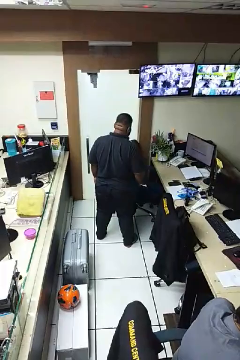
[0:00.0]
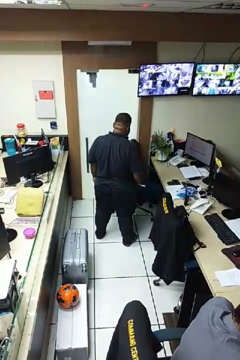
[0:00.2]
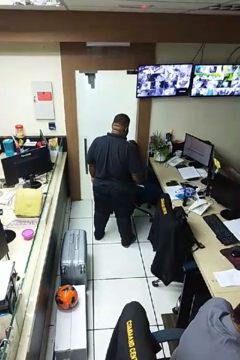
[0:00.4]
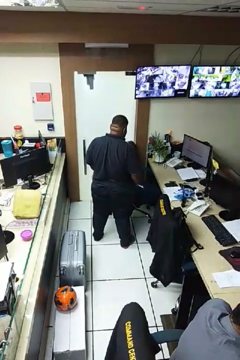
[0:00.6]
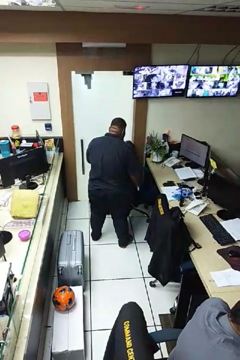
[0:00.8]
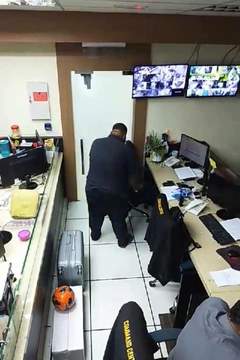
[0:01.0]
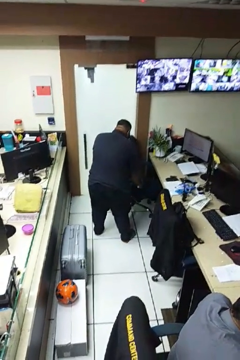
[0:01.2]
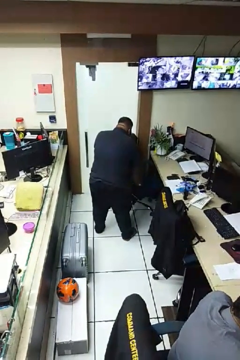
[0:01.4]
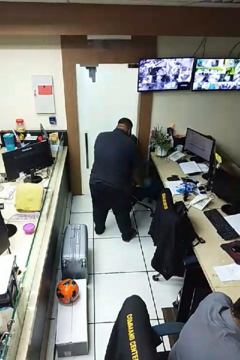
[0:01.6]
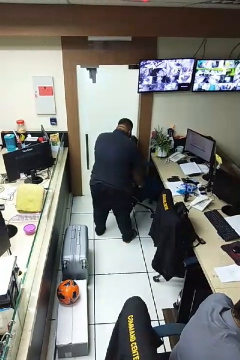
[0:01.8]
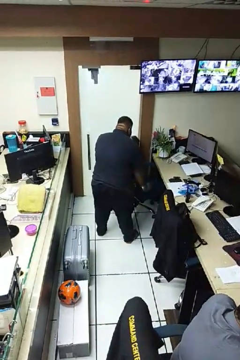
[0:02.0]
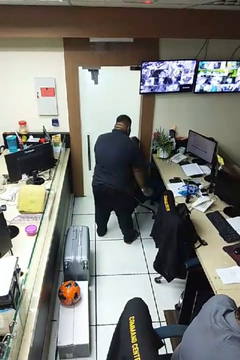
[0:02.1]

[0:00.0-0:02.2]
person dusts furniture

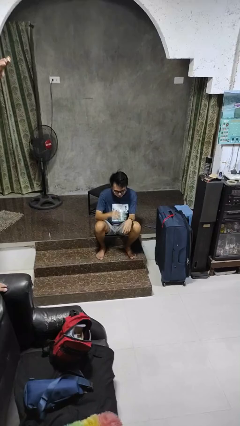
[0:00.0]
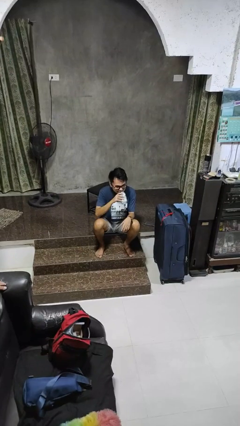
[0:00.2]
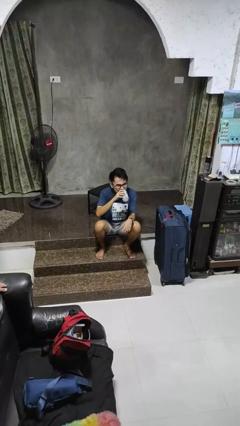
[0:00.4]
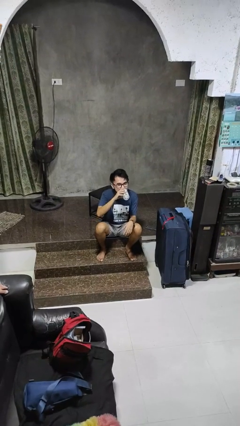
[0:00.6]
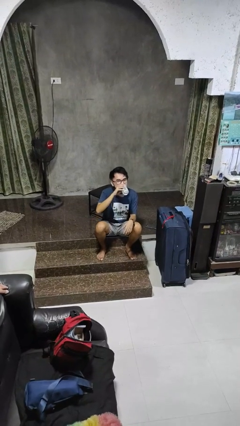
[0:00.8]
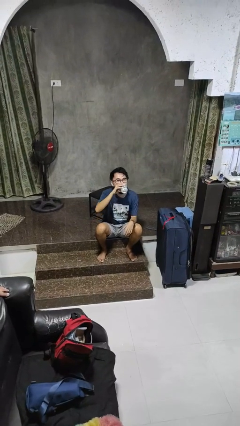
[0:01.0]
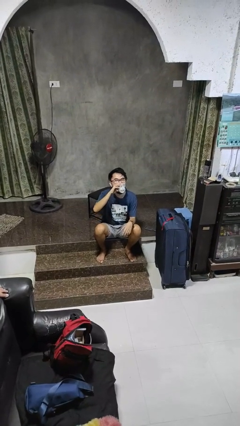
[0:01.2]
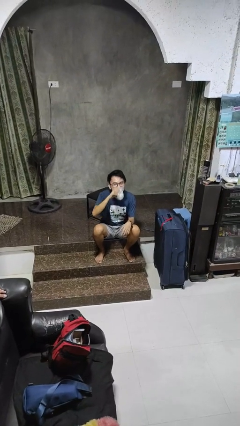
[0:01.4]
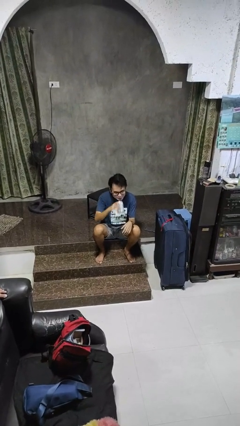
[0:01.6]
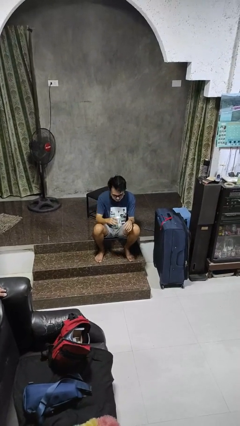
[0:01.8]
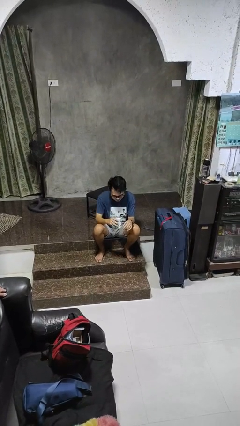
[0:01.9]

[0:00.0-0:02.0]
person drinks from beverage can

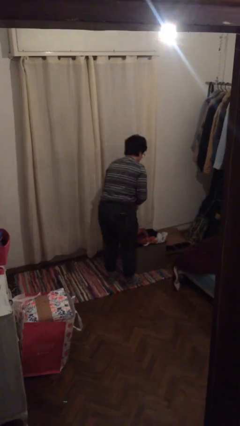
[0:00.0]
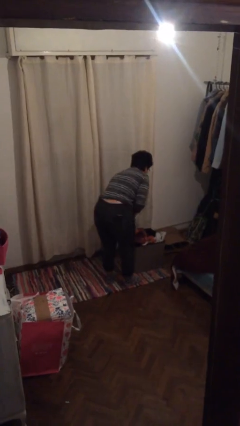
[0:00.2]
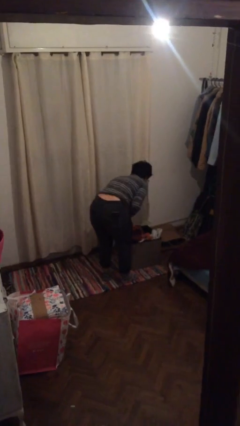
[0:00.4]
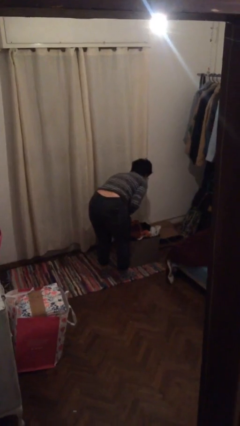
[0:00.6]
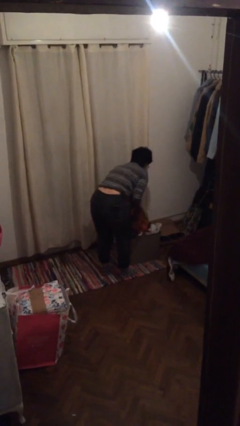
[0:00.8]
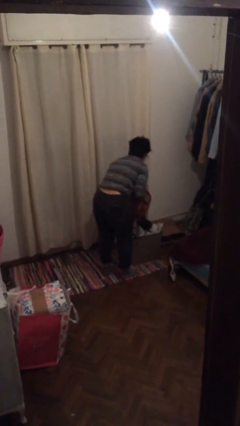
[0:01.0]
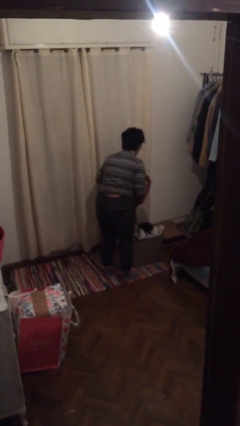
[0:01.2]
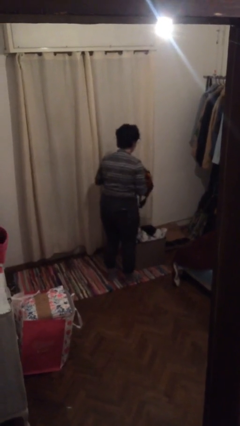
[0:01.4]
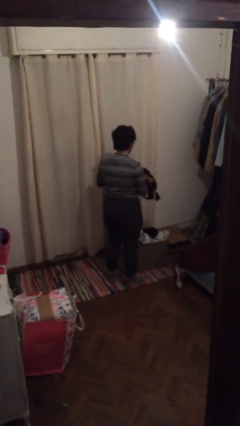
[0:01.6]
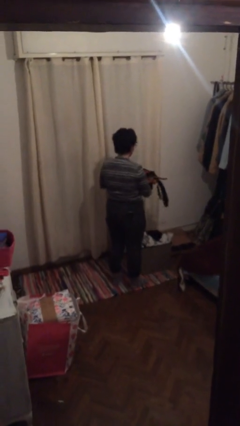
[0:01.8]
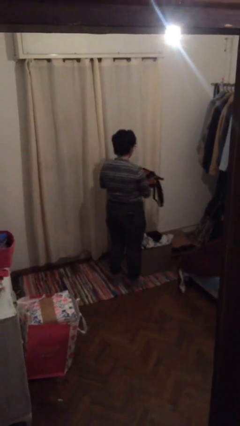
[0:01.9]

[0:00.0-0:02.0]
person takes object from basket

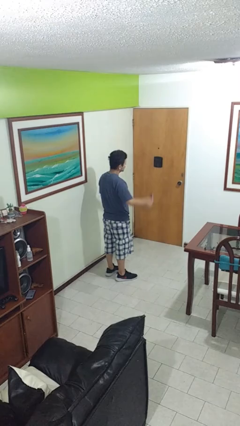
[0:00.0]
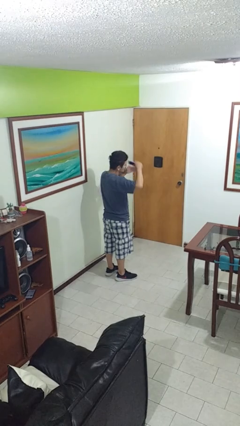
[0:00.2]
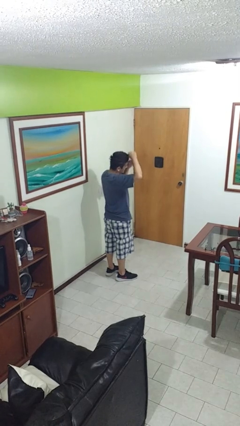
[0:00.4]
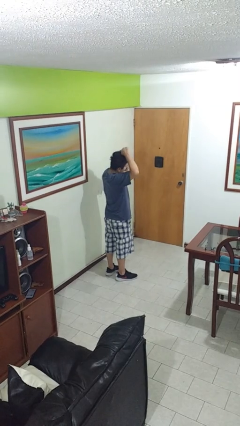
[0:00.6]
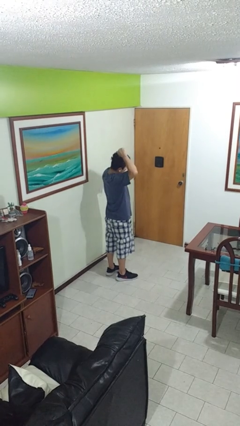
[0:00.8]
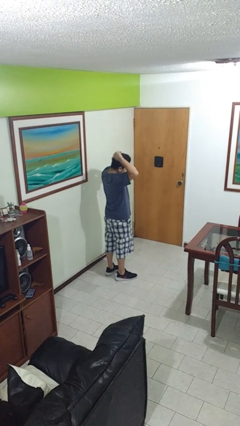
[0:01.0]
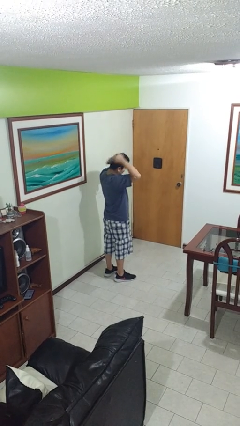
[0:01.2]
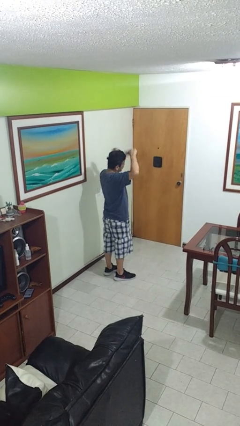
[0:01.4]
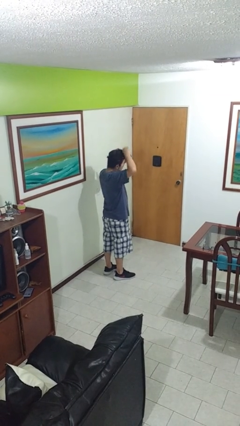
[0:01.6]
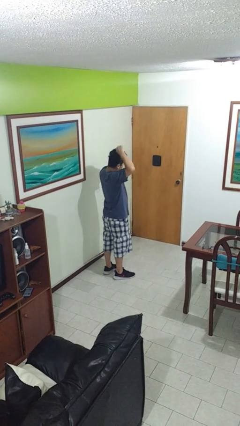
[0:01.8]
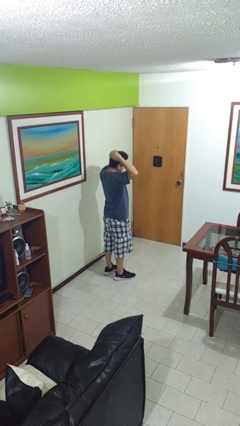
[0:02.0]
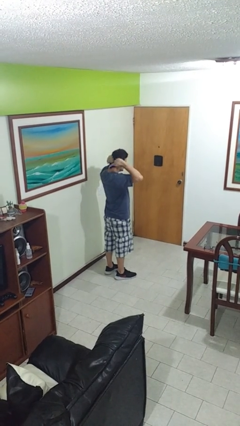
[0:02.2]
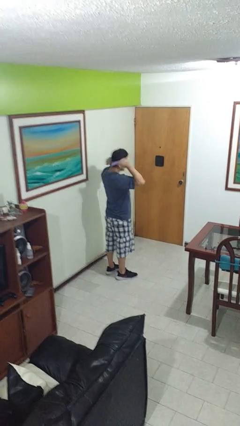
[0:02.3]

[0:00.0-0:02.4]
person brushes hair

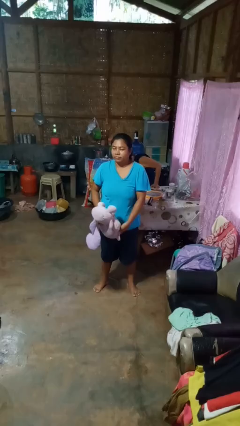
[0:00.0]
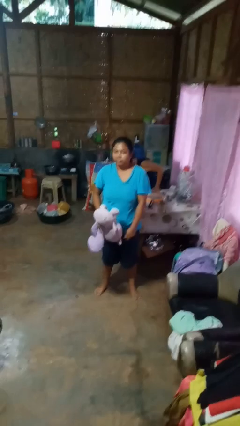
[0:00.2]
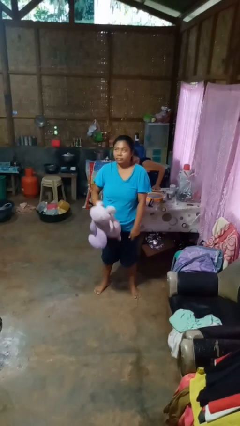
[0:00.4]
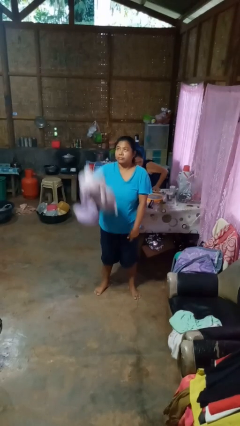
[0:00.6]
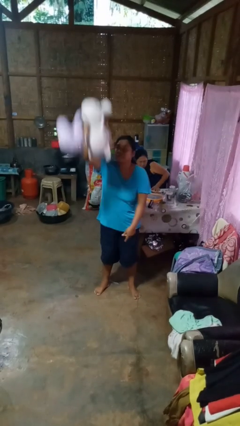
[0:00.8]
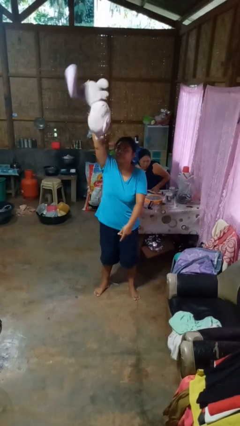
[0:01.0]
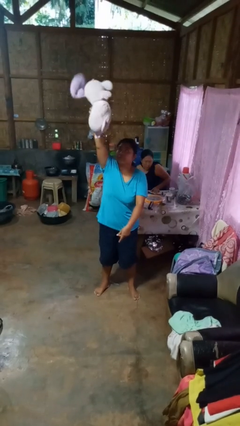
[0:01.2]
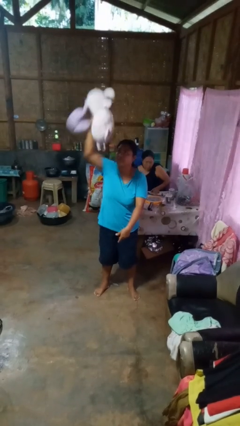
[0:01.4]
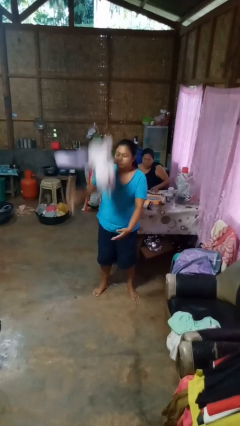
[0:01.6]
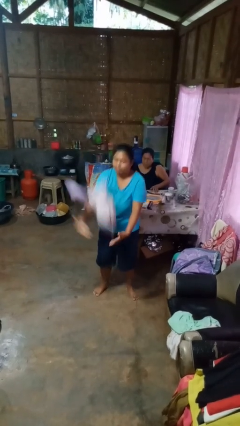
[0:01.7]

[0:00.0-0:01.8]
person drops object

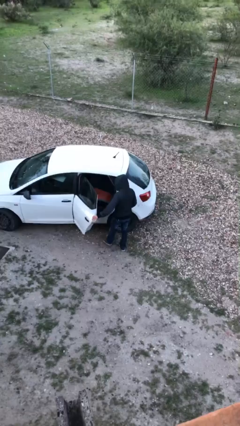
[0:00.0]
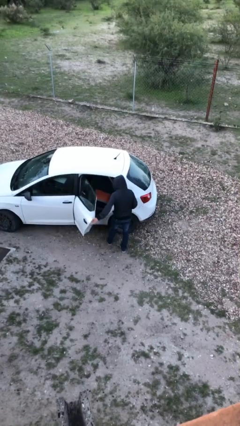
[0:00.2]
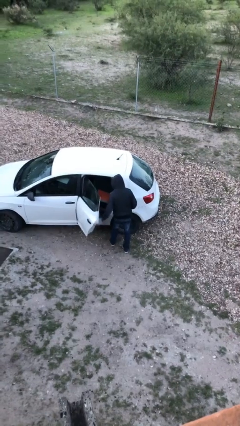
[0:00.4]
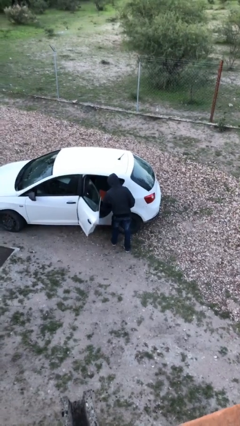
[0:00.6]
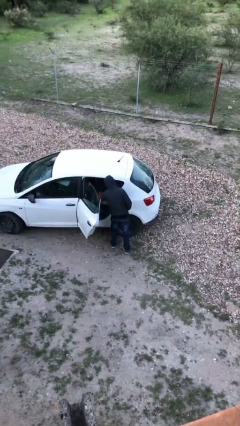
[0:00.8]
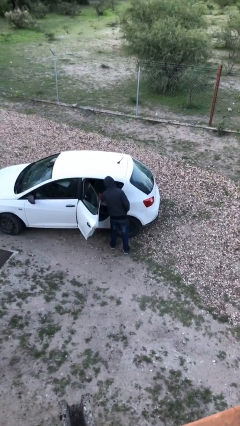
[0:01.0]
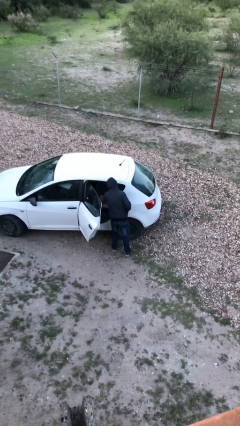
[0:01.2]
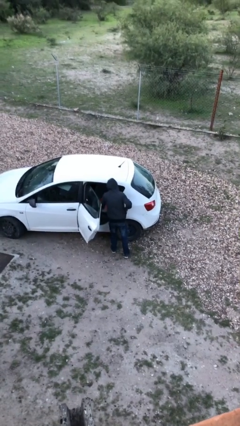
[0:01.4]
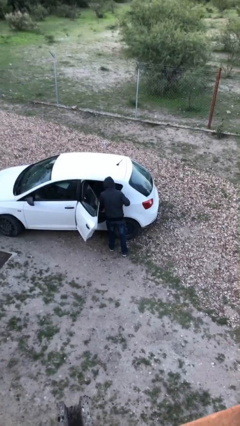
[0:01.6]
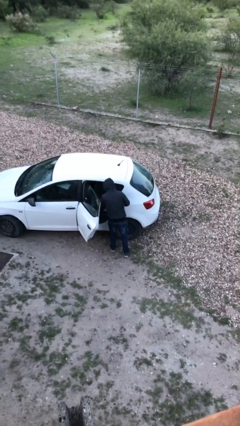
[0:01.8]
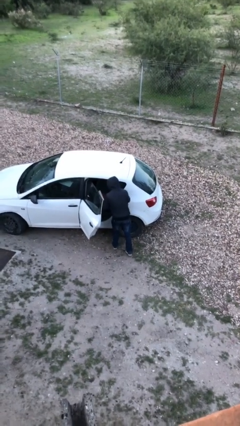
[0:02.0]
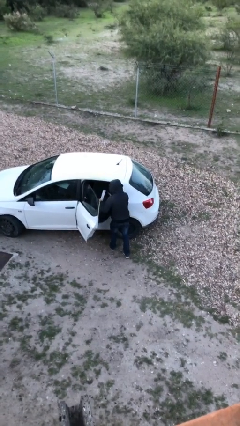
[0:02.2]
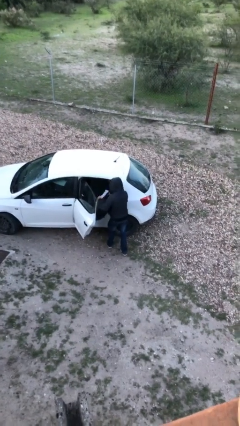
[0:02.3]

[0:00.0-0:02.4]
person unloads car

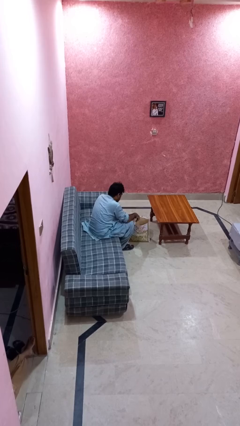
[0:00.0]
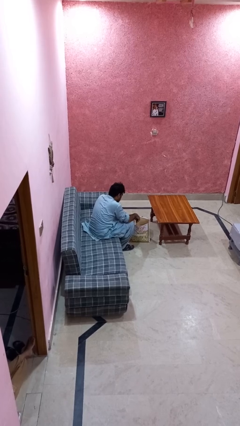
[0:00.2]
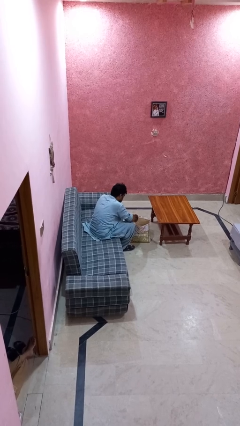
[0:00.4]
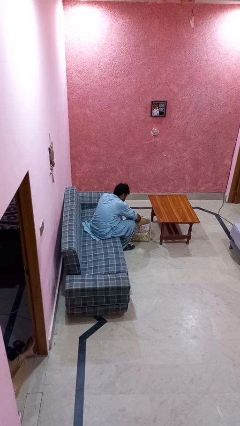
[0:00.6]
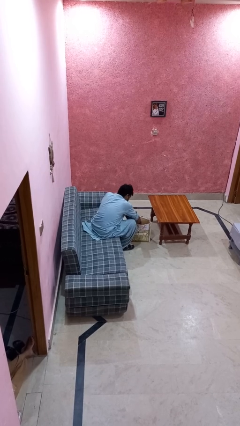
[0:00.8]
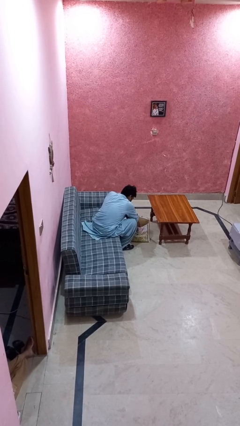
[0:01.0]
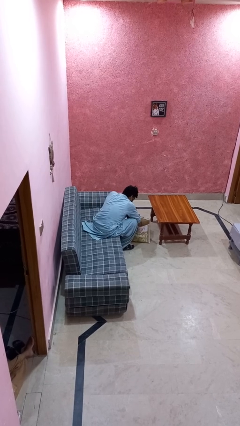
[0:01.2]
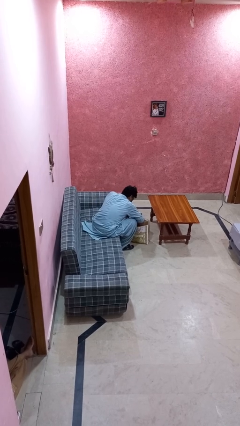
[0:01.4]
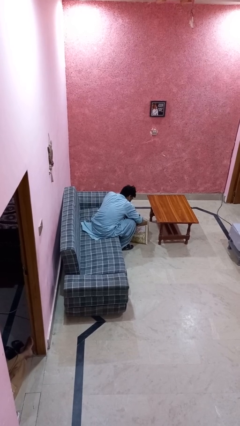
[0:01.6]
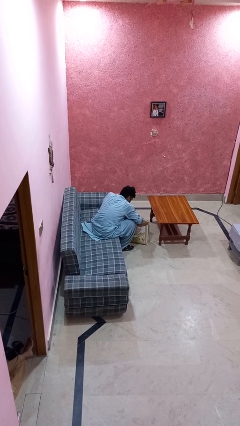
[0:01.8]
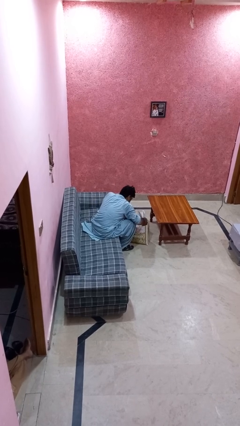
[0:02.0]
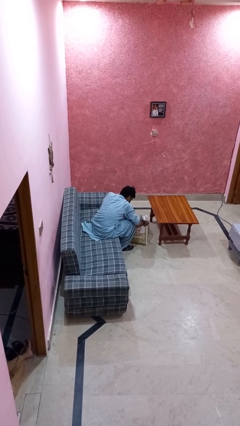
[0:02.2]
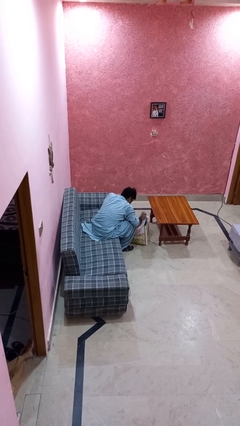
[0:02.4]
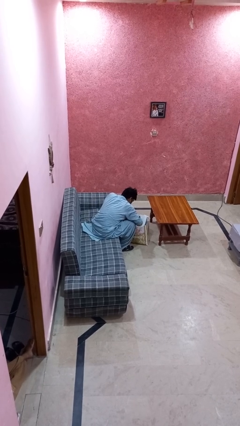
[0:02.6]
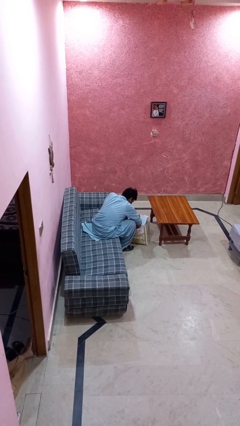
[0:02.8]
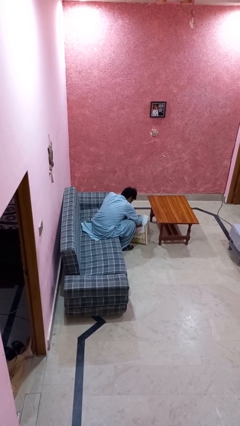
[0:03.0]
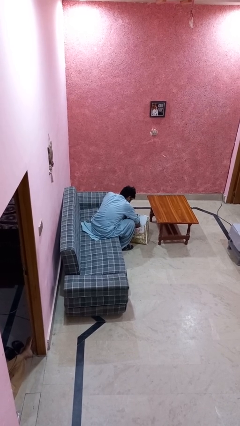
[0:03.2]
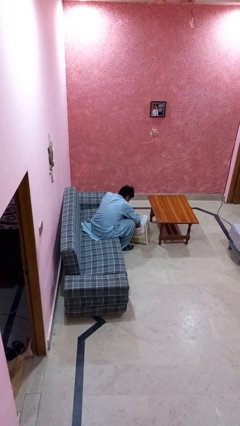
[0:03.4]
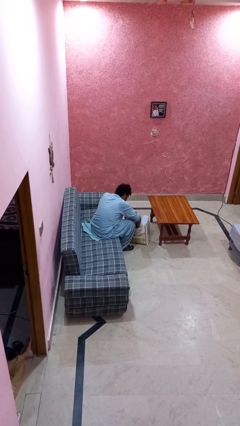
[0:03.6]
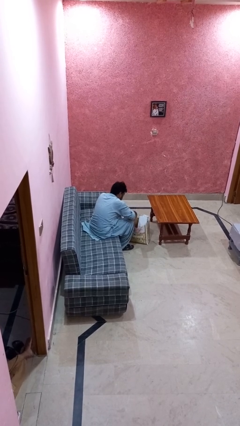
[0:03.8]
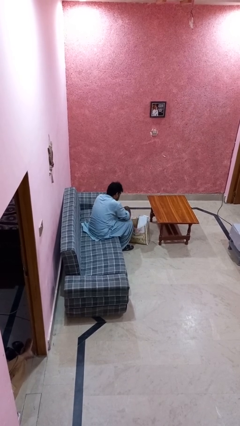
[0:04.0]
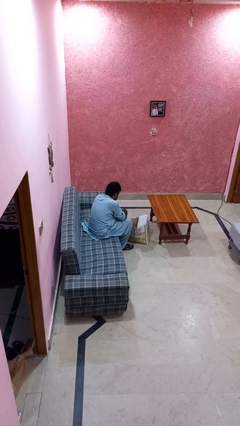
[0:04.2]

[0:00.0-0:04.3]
person searches in bag

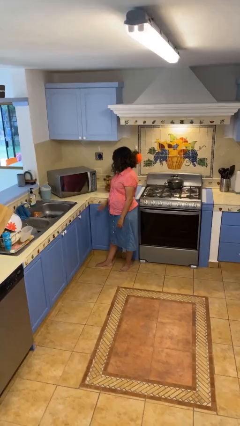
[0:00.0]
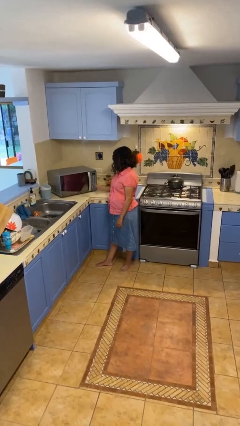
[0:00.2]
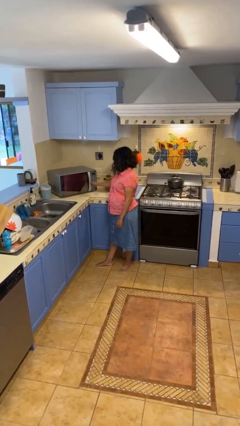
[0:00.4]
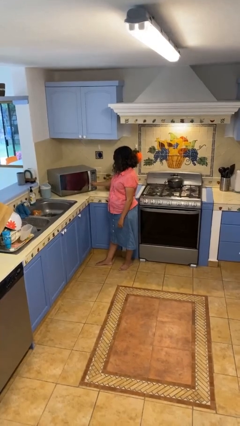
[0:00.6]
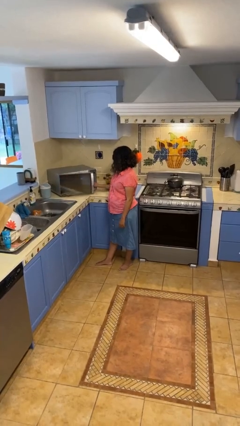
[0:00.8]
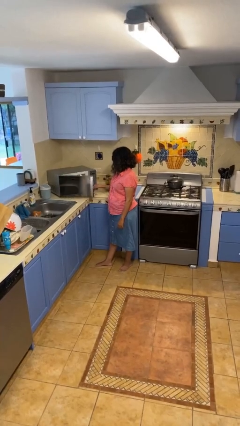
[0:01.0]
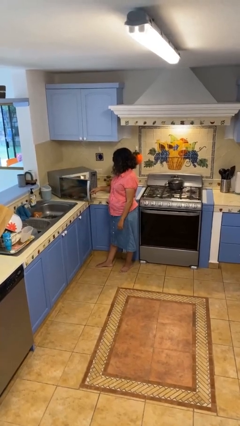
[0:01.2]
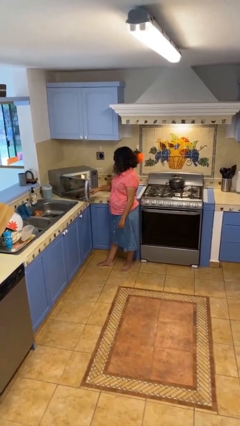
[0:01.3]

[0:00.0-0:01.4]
person opens microwave
